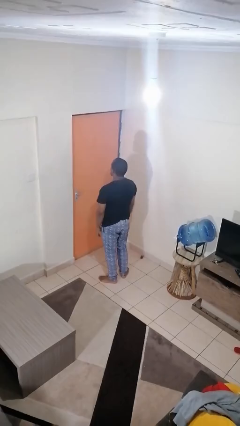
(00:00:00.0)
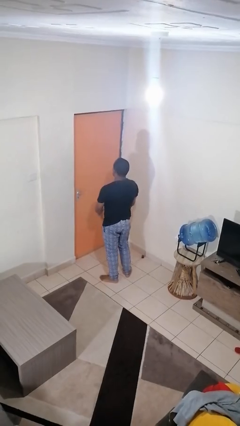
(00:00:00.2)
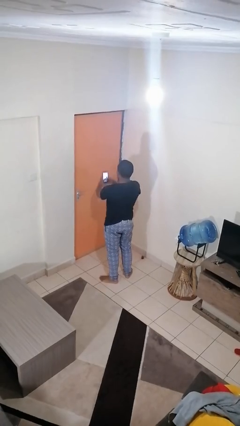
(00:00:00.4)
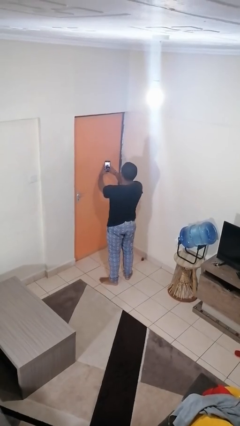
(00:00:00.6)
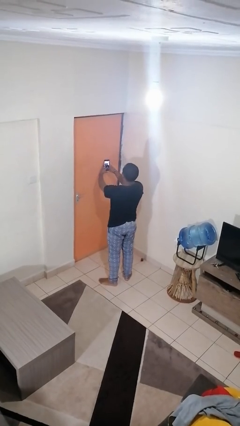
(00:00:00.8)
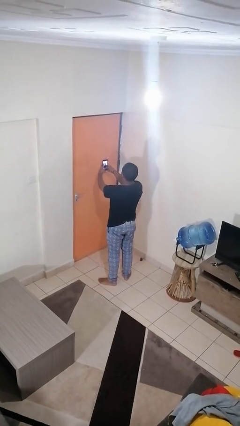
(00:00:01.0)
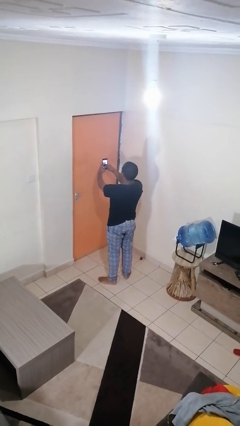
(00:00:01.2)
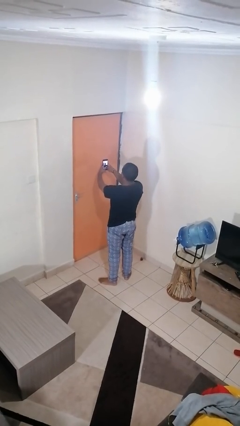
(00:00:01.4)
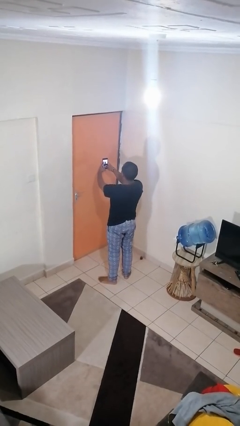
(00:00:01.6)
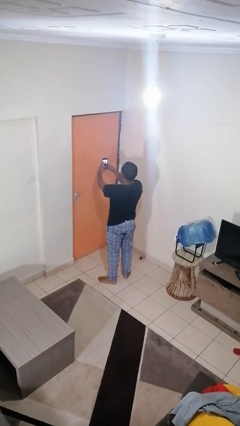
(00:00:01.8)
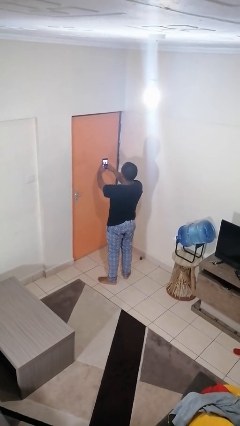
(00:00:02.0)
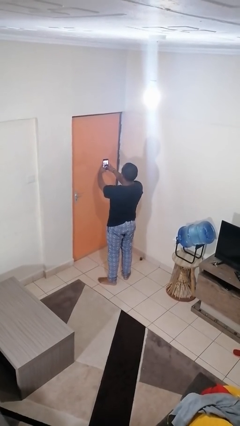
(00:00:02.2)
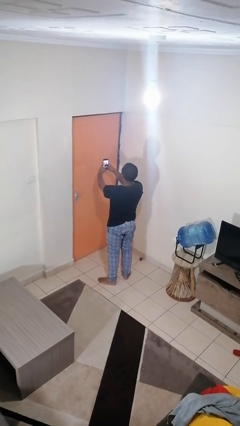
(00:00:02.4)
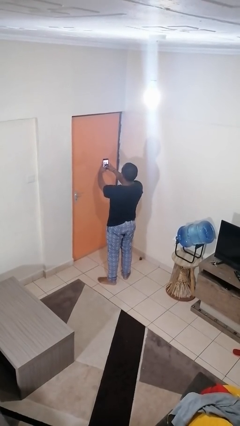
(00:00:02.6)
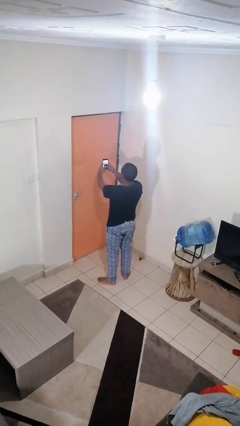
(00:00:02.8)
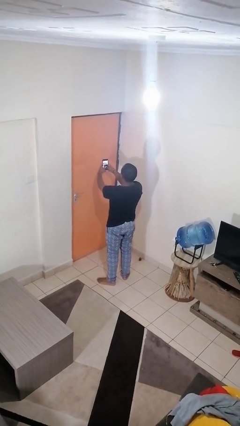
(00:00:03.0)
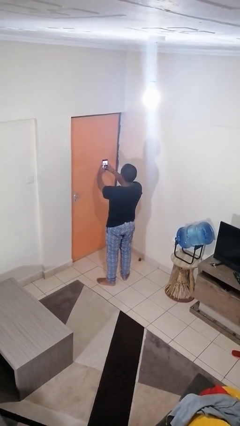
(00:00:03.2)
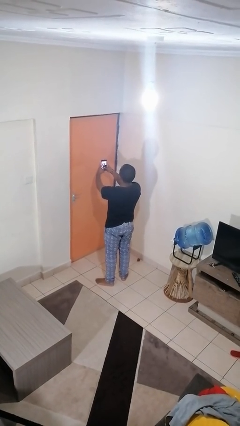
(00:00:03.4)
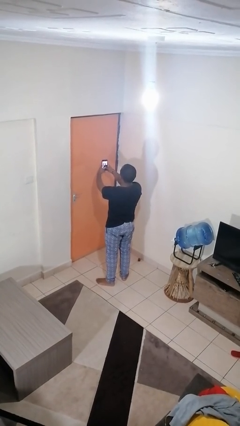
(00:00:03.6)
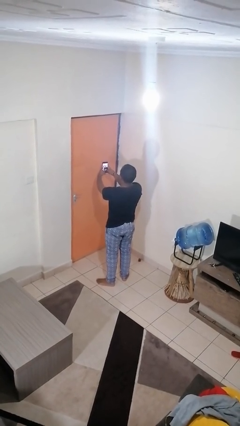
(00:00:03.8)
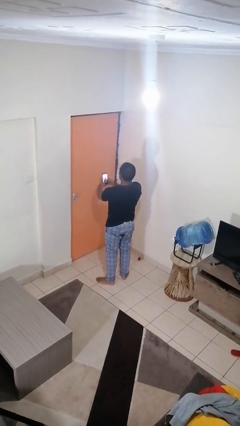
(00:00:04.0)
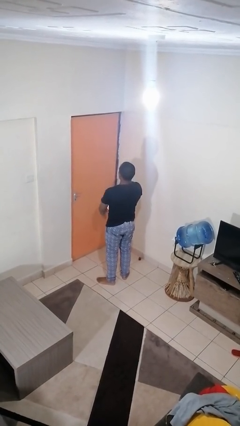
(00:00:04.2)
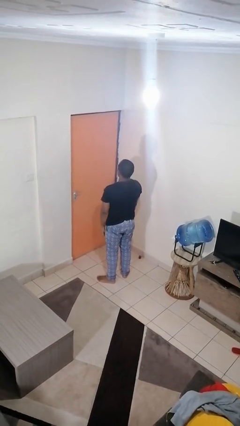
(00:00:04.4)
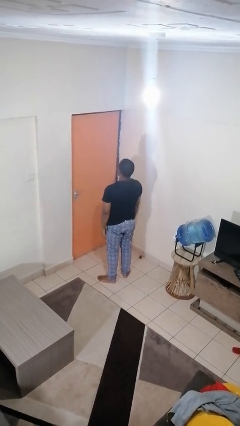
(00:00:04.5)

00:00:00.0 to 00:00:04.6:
person takes selfie
